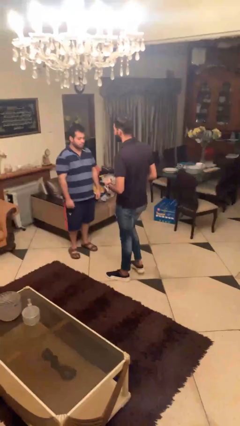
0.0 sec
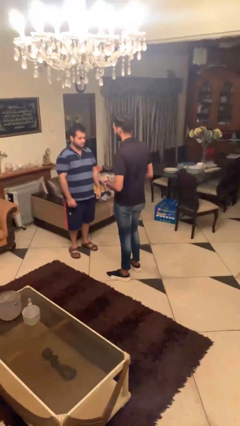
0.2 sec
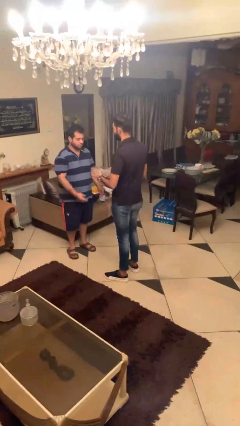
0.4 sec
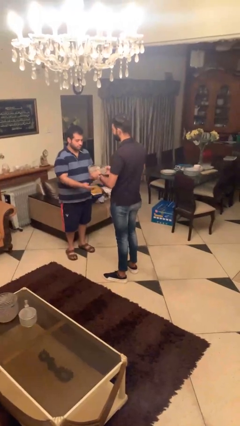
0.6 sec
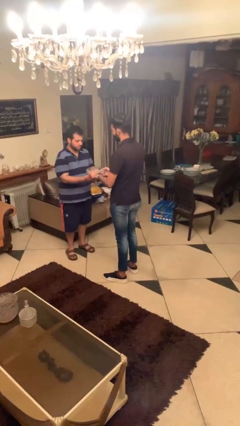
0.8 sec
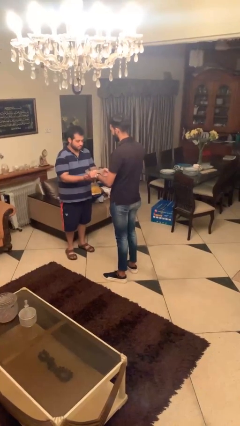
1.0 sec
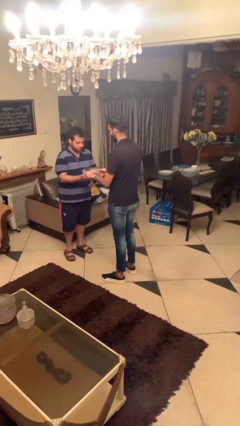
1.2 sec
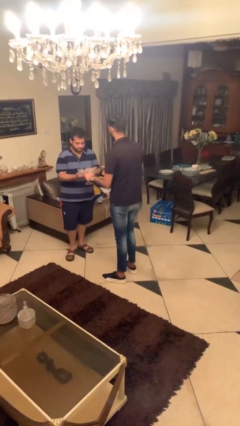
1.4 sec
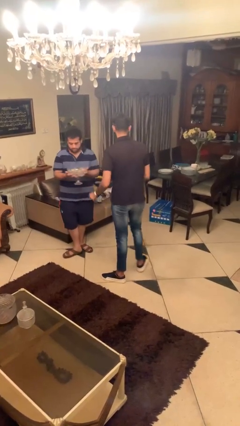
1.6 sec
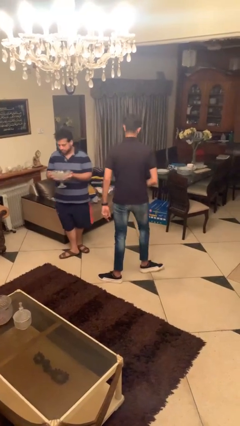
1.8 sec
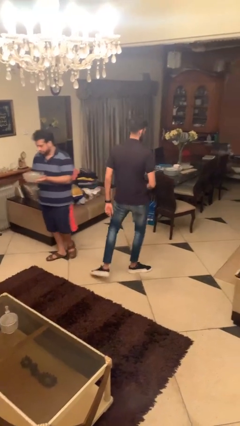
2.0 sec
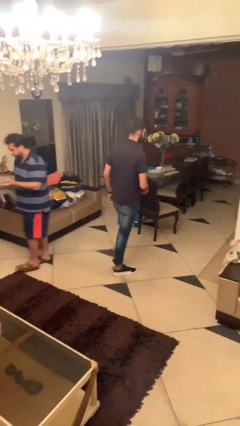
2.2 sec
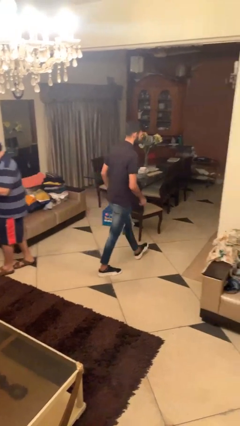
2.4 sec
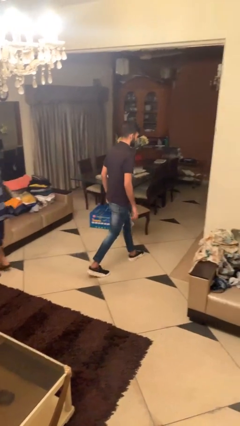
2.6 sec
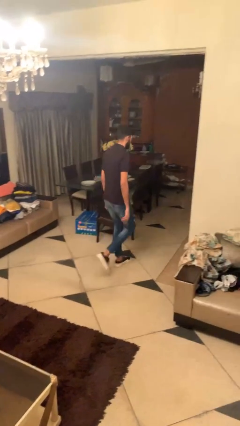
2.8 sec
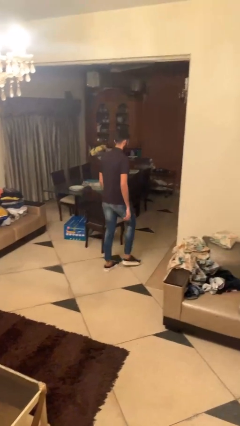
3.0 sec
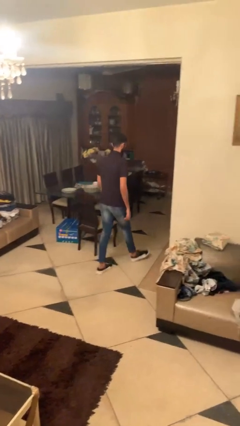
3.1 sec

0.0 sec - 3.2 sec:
person transfers object to person

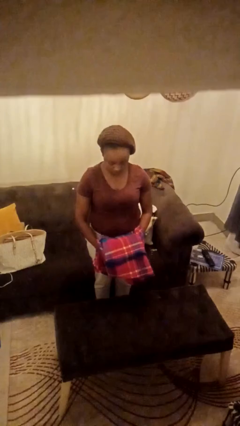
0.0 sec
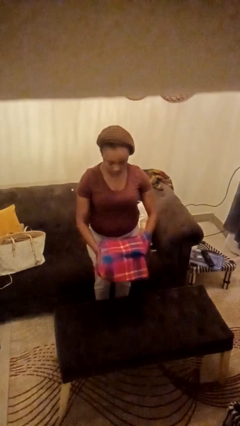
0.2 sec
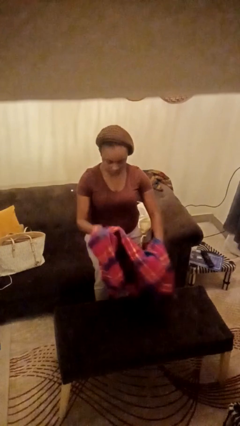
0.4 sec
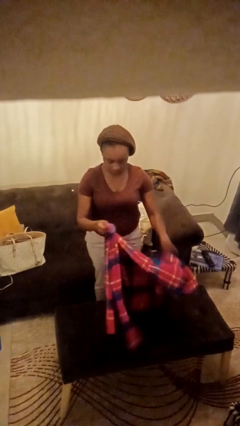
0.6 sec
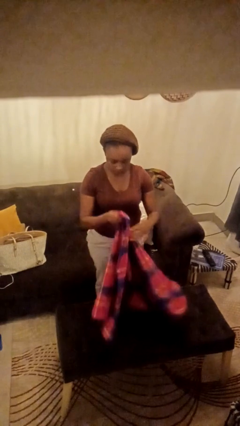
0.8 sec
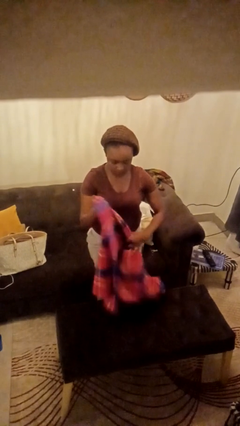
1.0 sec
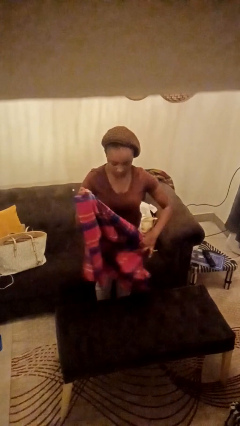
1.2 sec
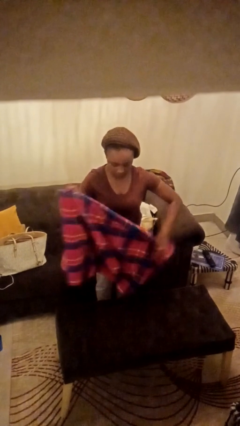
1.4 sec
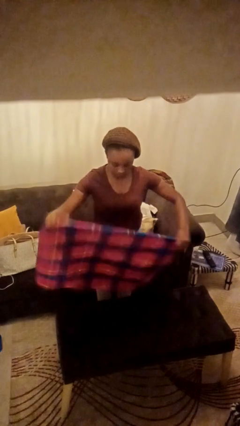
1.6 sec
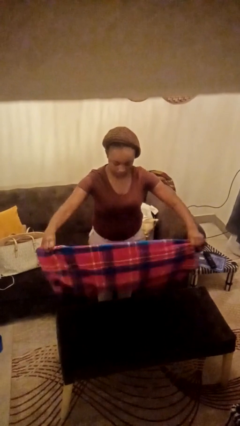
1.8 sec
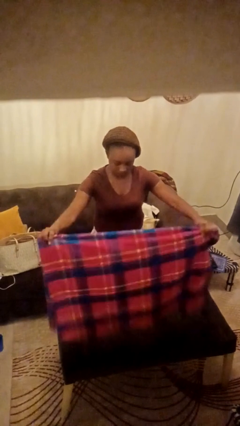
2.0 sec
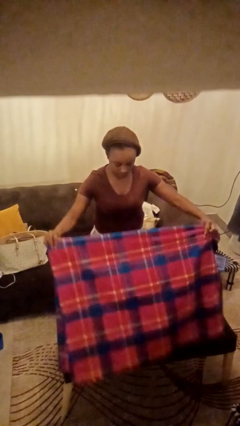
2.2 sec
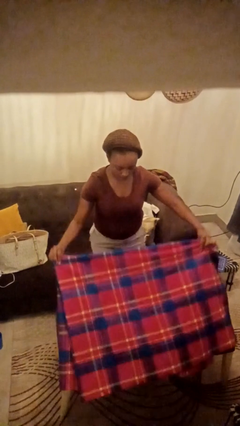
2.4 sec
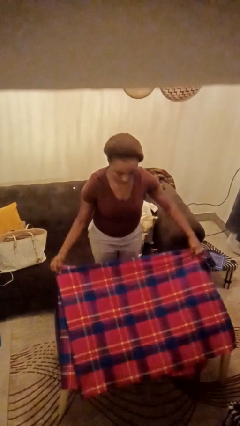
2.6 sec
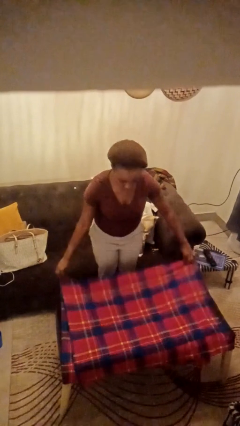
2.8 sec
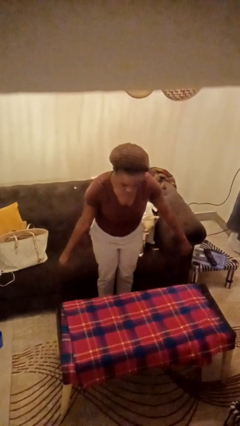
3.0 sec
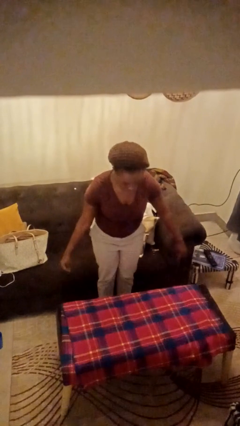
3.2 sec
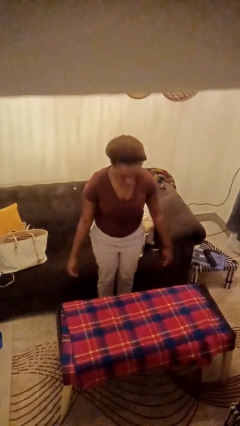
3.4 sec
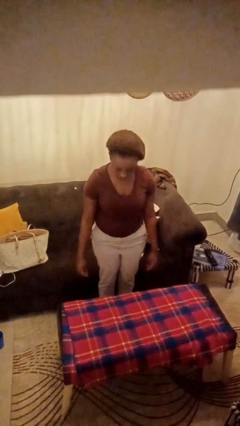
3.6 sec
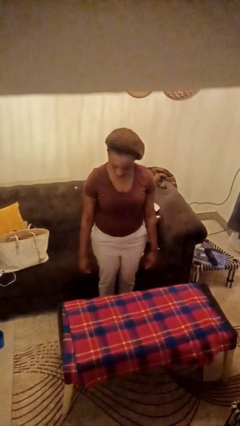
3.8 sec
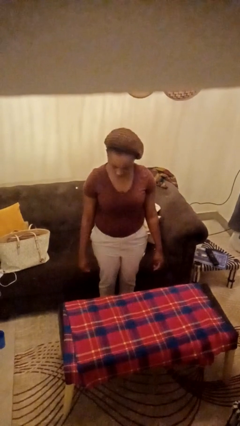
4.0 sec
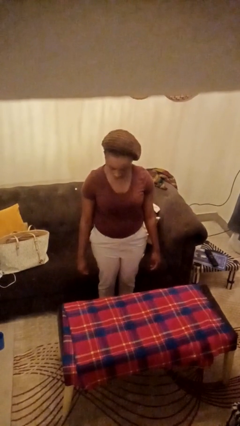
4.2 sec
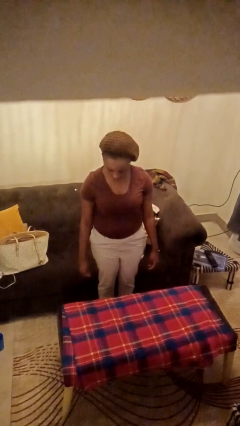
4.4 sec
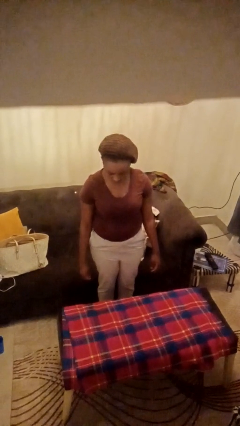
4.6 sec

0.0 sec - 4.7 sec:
person spreads tablecloth

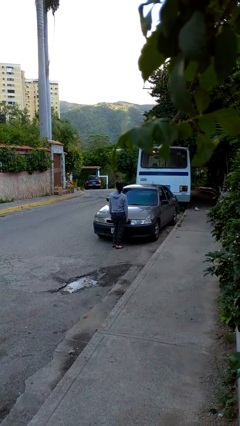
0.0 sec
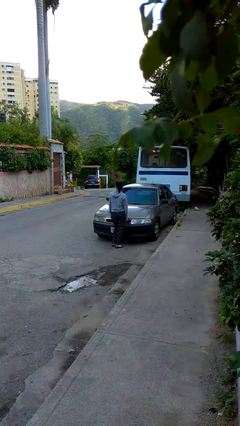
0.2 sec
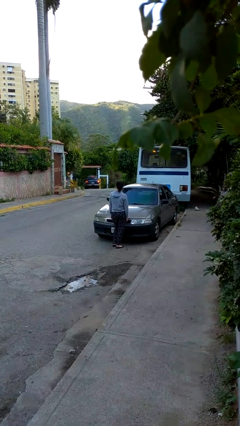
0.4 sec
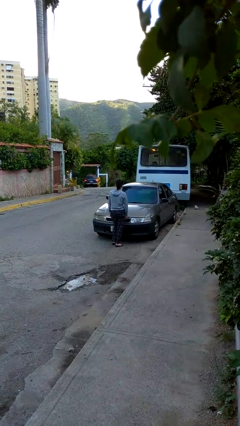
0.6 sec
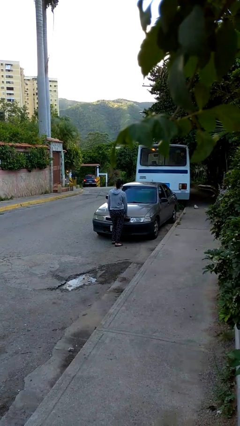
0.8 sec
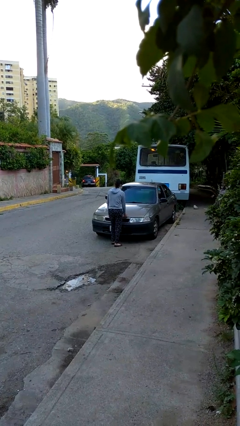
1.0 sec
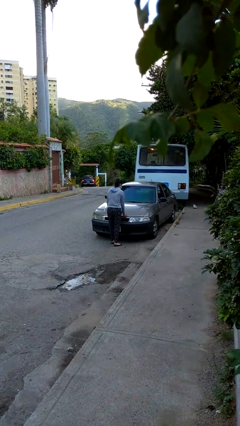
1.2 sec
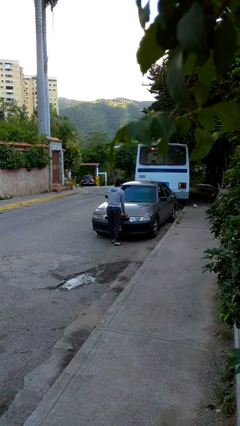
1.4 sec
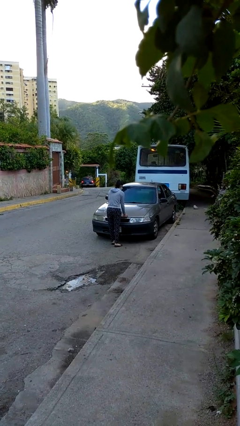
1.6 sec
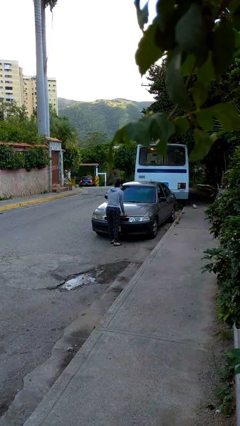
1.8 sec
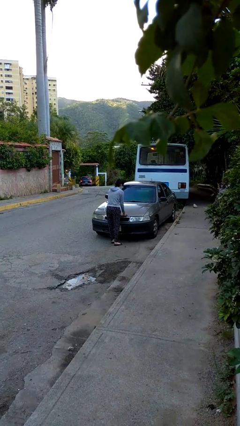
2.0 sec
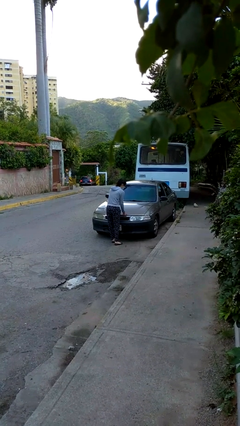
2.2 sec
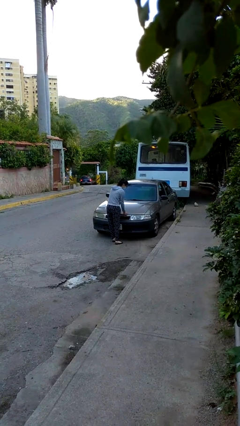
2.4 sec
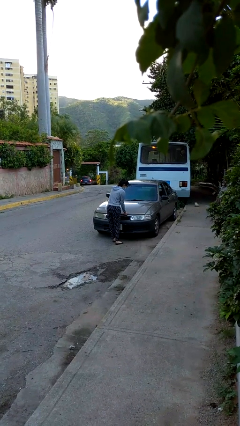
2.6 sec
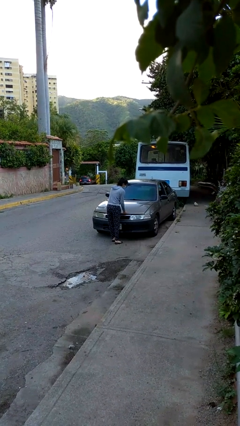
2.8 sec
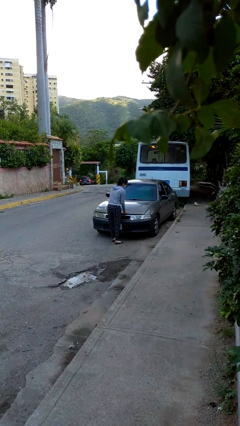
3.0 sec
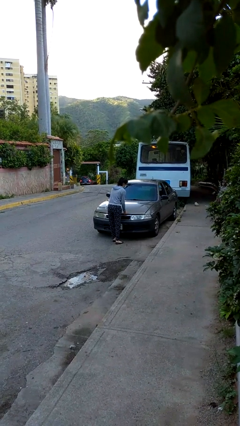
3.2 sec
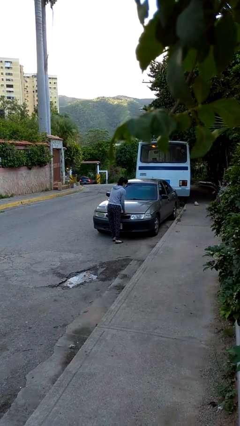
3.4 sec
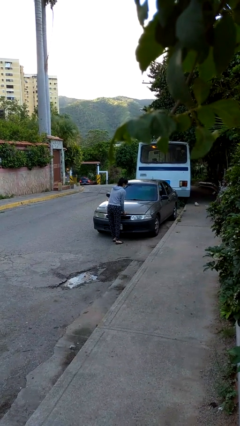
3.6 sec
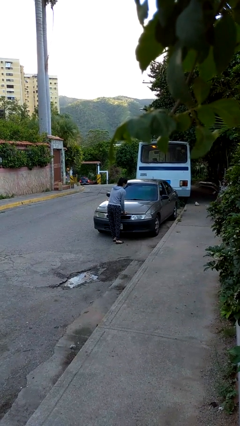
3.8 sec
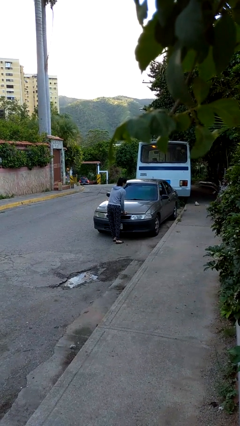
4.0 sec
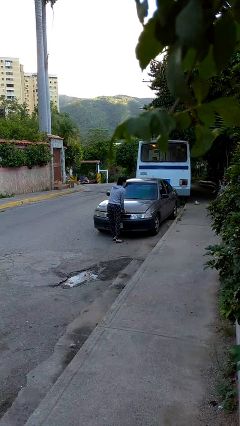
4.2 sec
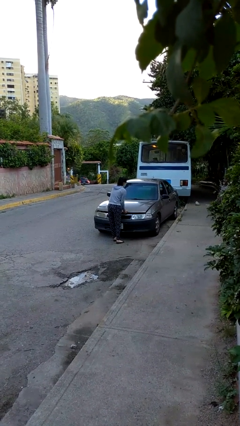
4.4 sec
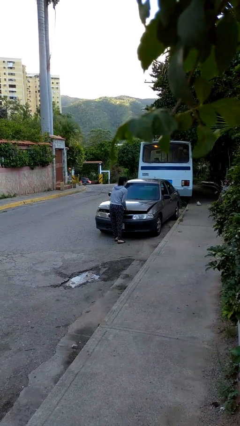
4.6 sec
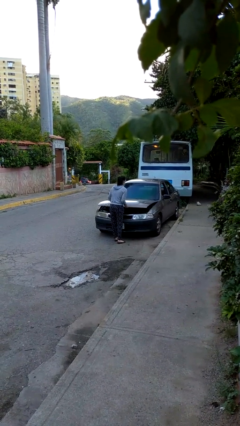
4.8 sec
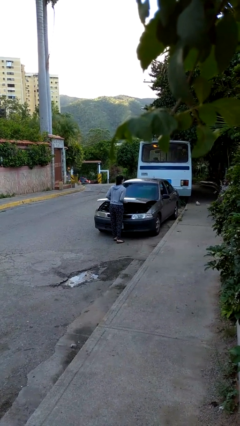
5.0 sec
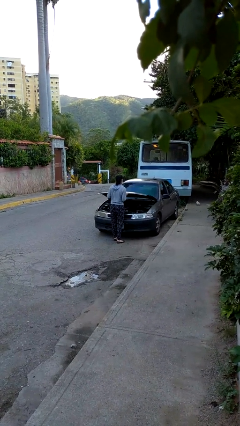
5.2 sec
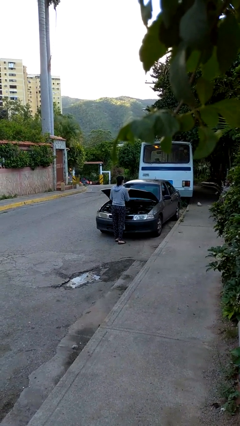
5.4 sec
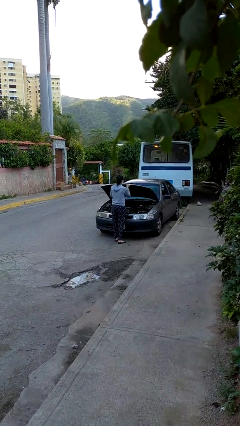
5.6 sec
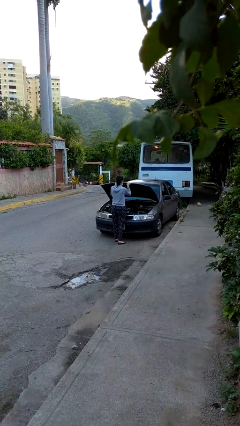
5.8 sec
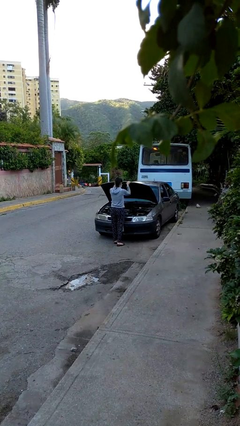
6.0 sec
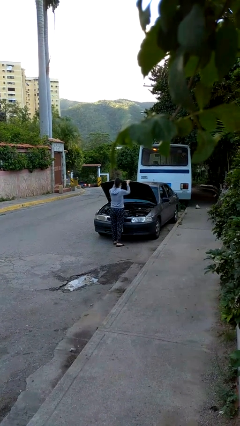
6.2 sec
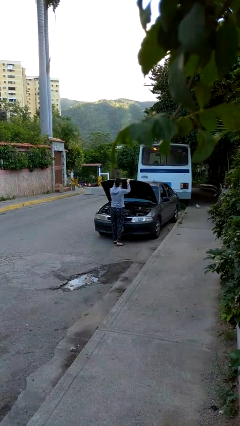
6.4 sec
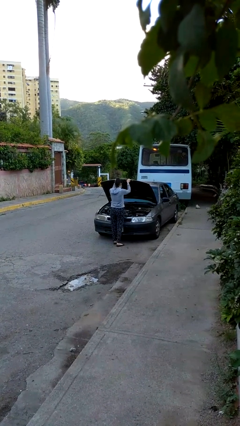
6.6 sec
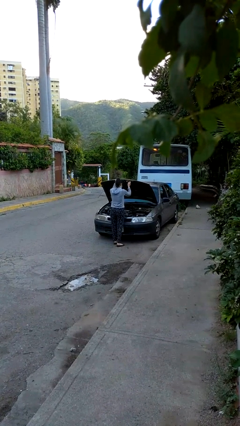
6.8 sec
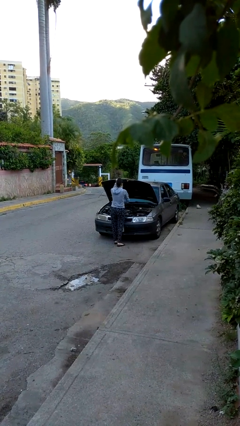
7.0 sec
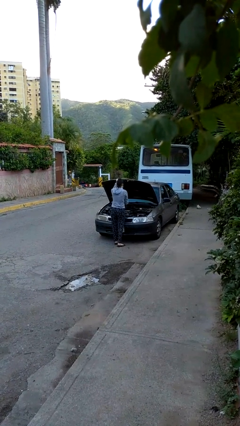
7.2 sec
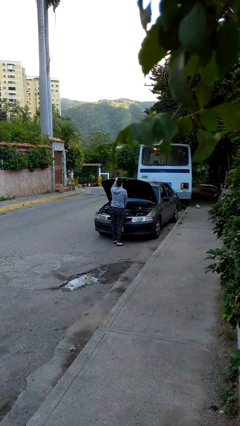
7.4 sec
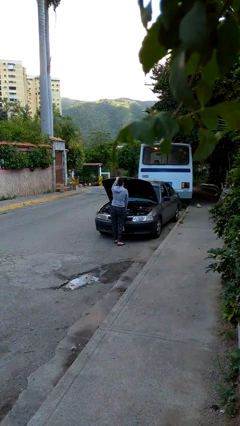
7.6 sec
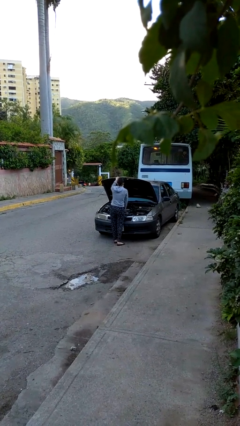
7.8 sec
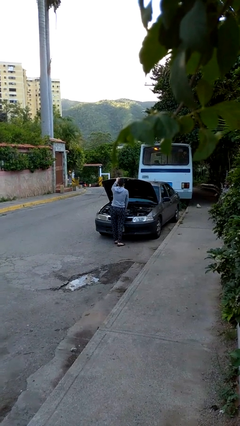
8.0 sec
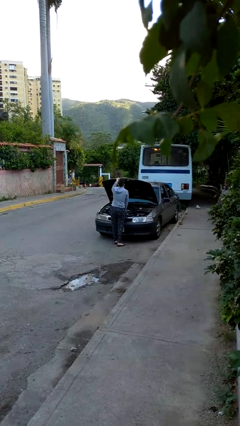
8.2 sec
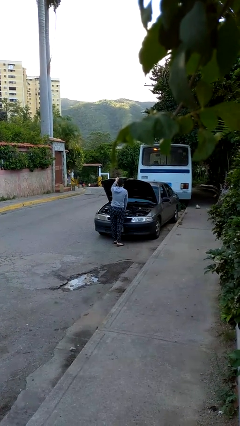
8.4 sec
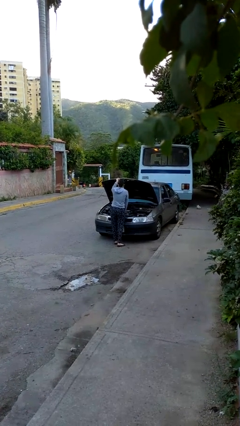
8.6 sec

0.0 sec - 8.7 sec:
person opens car hood

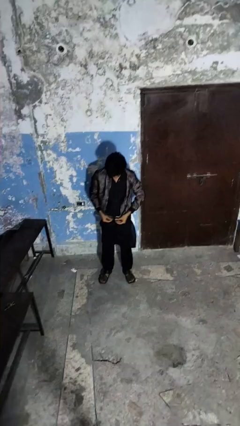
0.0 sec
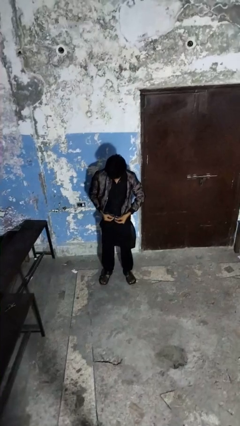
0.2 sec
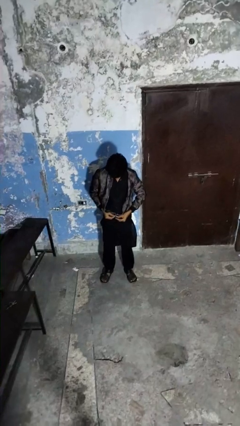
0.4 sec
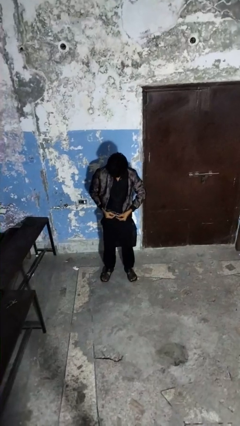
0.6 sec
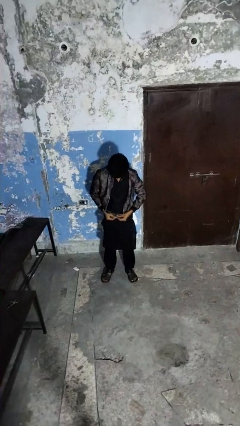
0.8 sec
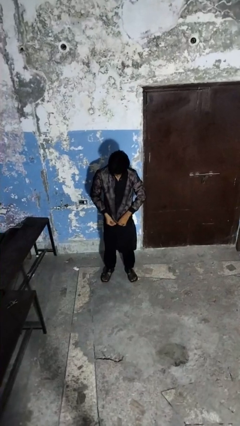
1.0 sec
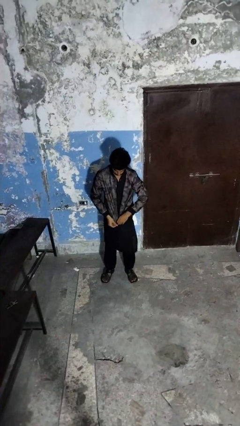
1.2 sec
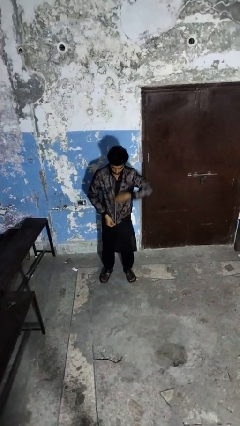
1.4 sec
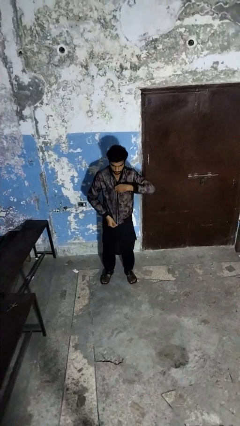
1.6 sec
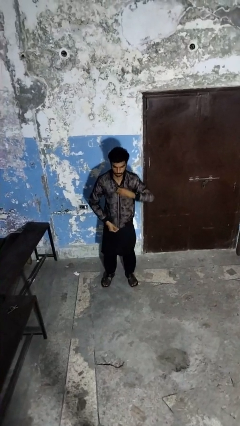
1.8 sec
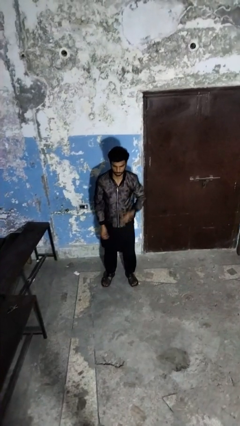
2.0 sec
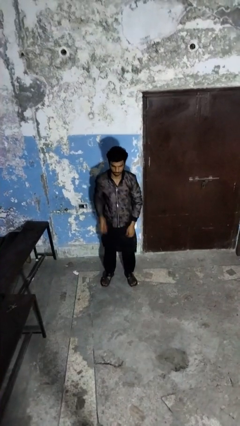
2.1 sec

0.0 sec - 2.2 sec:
person zips up jacket
